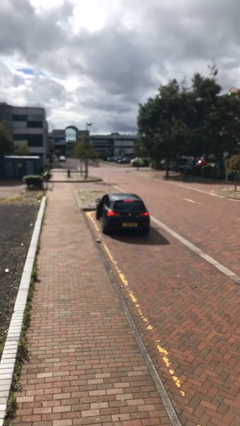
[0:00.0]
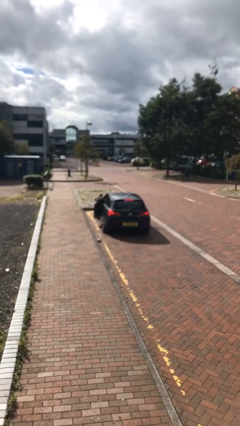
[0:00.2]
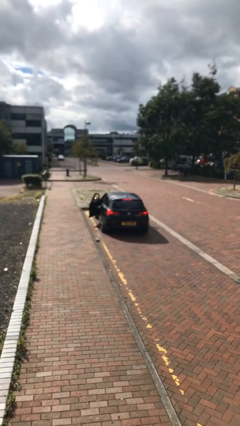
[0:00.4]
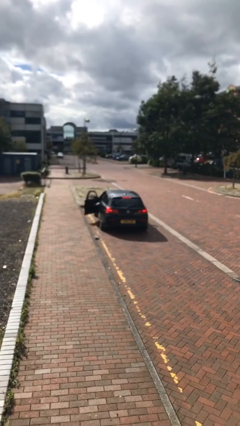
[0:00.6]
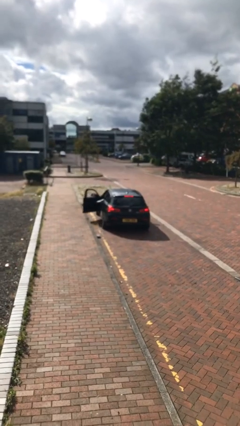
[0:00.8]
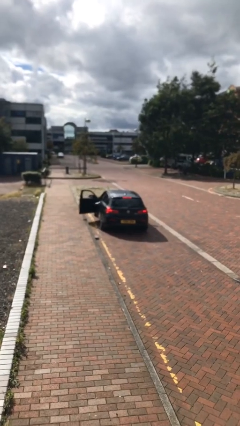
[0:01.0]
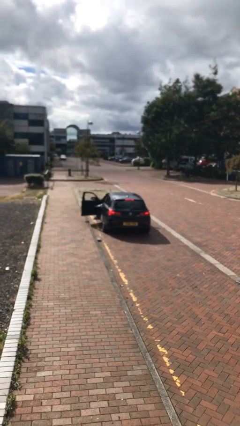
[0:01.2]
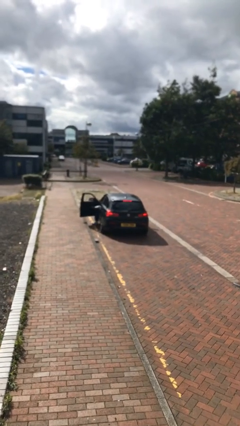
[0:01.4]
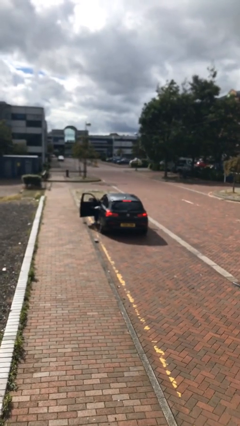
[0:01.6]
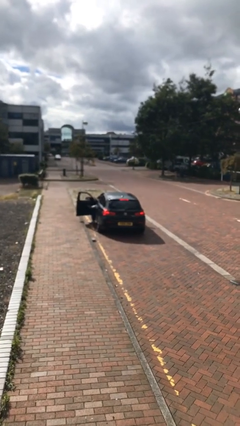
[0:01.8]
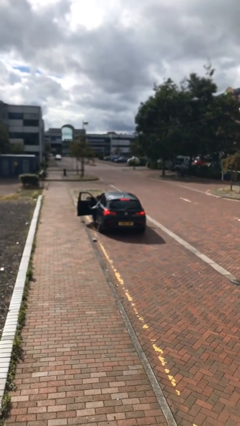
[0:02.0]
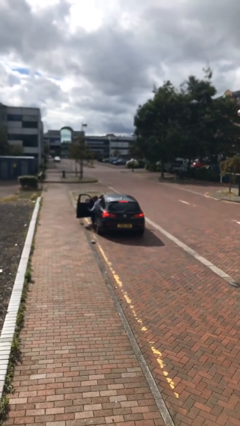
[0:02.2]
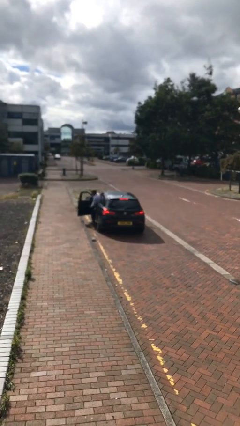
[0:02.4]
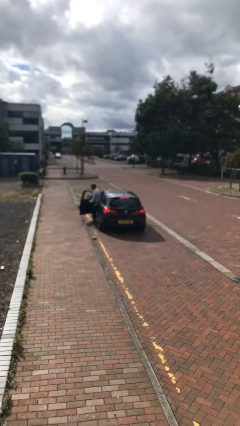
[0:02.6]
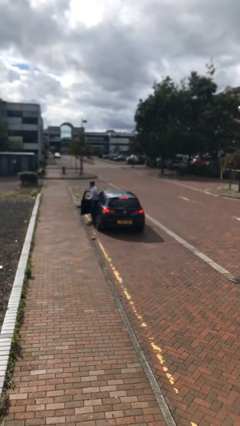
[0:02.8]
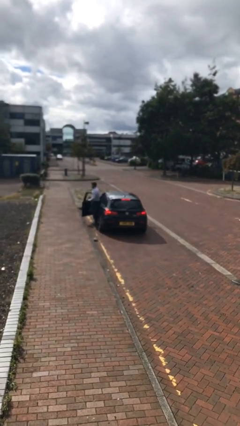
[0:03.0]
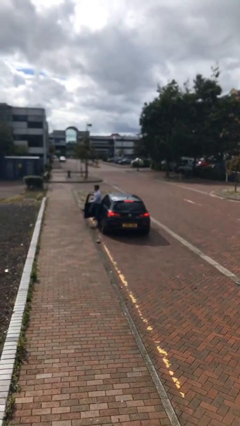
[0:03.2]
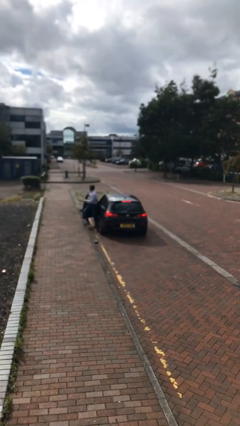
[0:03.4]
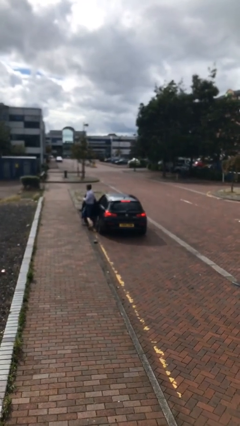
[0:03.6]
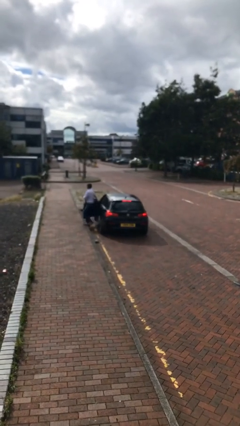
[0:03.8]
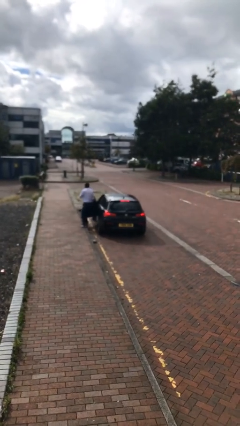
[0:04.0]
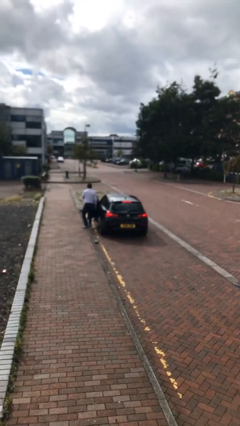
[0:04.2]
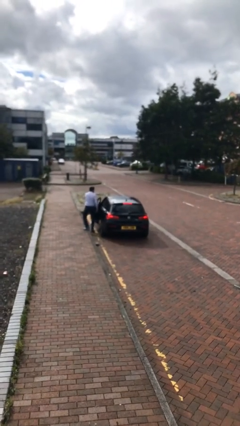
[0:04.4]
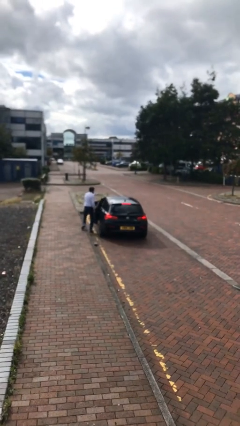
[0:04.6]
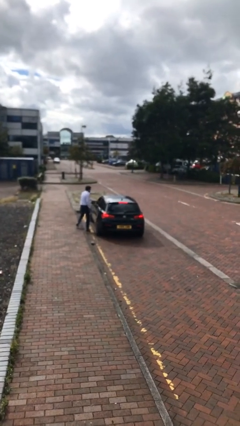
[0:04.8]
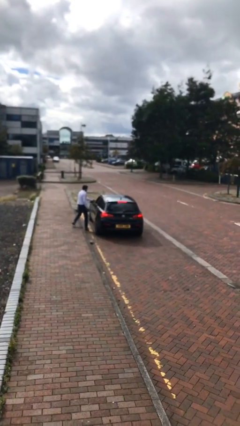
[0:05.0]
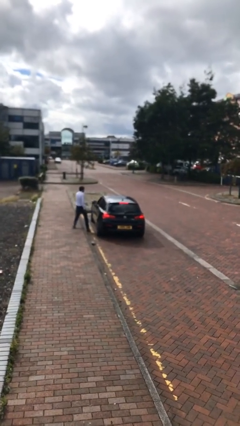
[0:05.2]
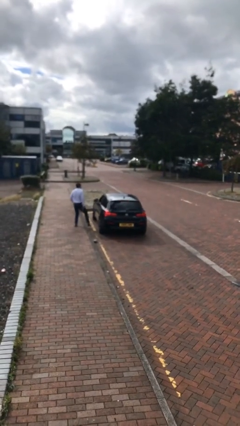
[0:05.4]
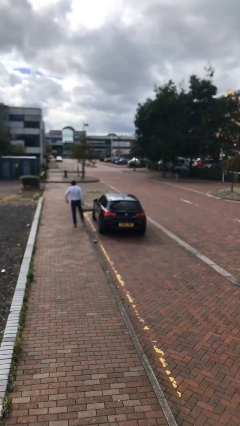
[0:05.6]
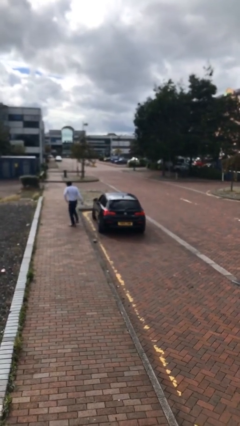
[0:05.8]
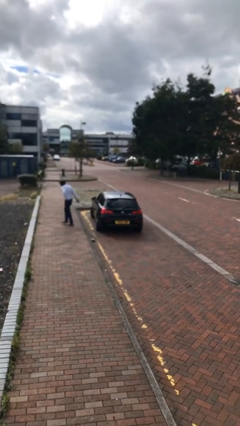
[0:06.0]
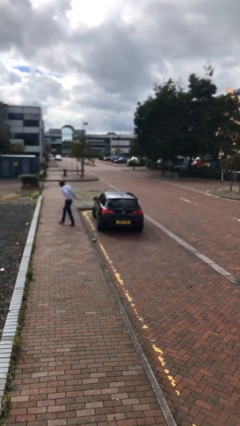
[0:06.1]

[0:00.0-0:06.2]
car drops off person

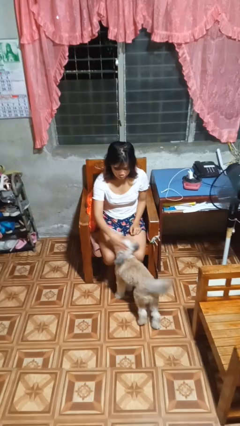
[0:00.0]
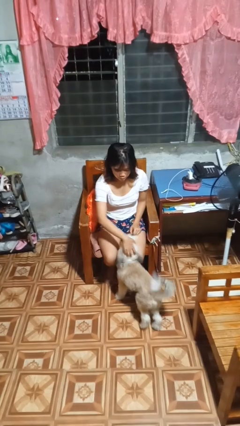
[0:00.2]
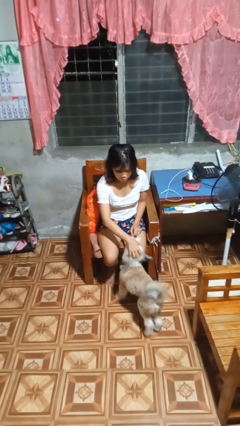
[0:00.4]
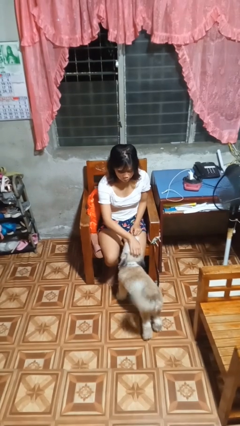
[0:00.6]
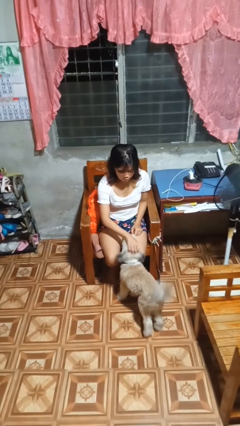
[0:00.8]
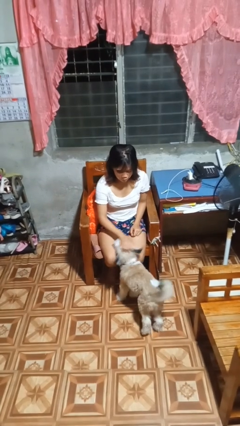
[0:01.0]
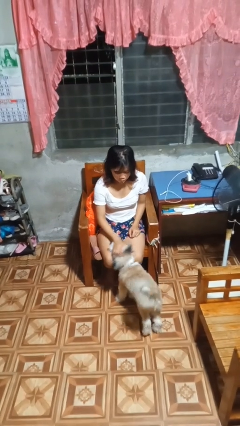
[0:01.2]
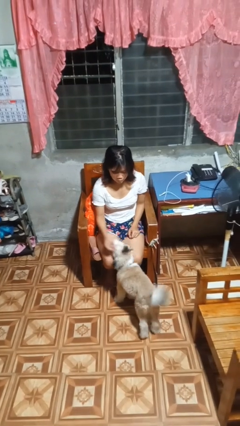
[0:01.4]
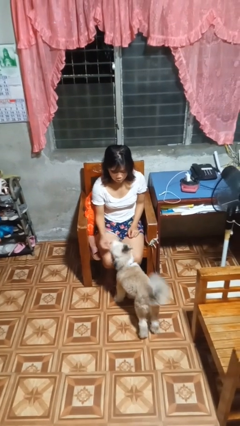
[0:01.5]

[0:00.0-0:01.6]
person pets dog

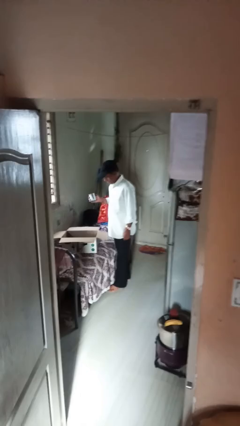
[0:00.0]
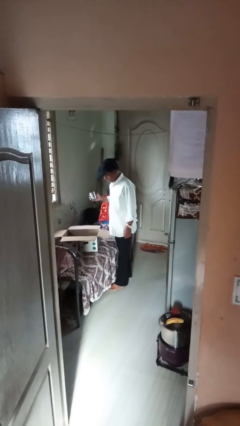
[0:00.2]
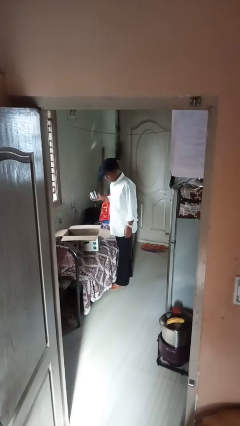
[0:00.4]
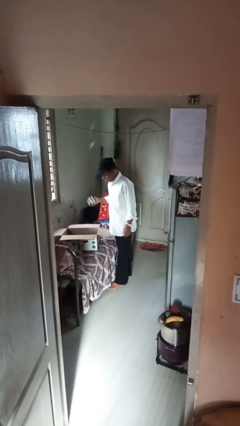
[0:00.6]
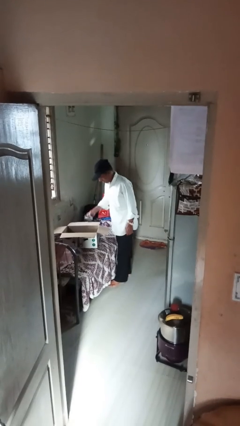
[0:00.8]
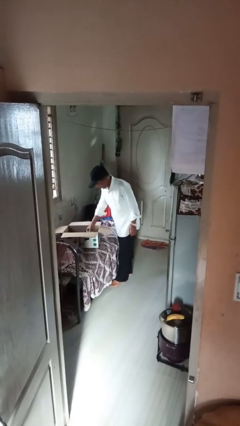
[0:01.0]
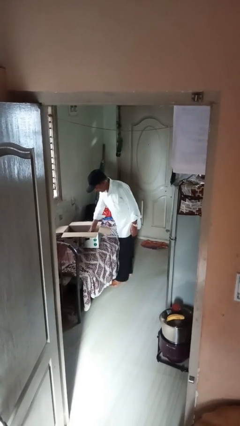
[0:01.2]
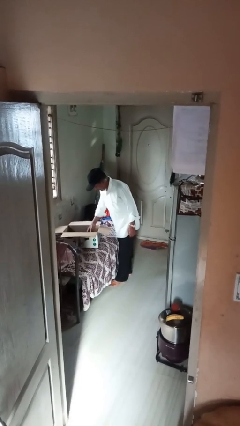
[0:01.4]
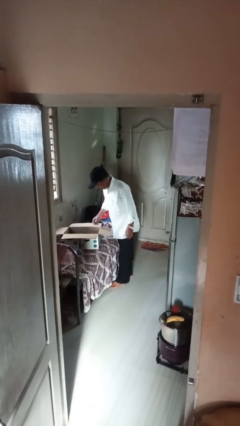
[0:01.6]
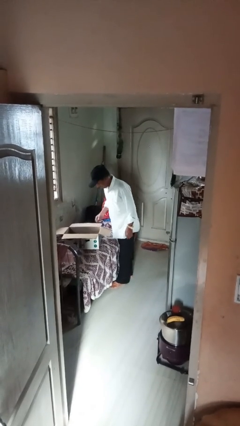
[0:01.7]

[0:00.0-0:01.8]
person puts object into box

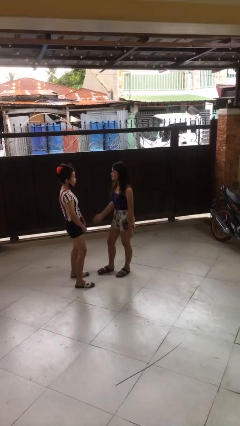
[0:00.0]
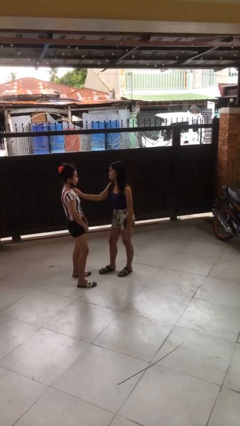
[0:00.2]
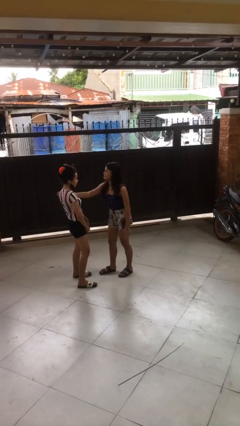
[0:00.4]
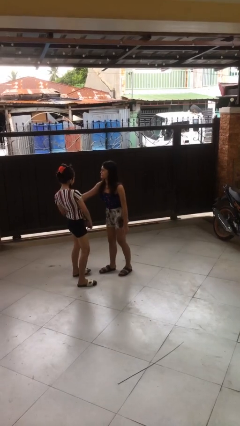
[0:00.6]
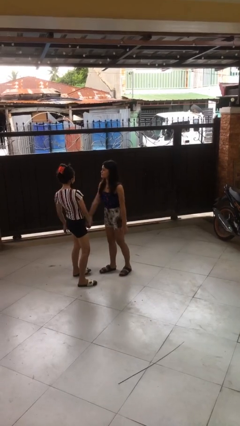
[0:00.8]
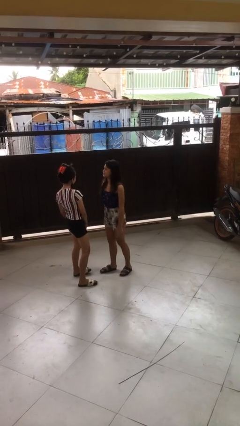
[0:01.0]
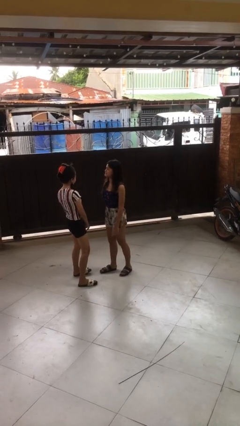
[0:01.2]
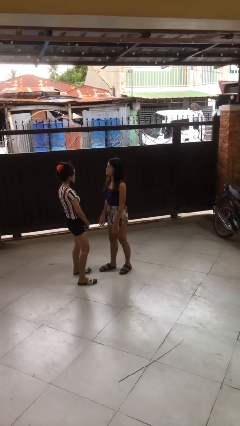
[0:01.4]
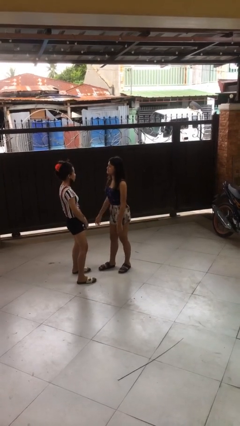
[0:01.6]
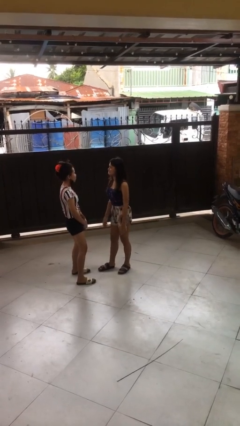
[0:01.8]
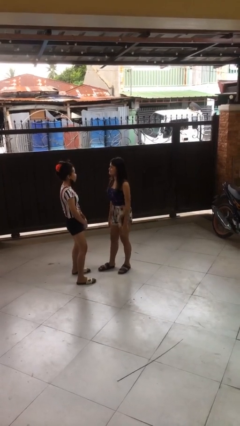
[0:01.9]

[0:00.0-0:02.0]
person shoves person

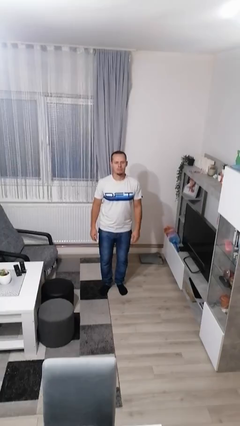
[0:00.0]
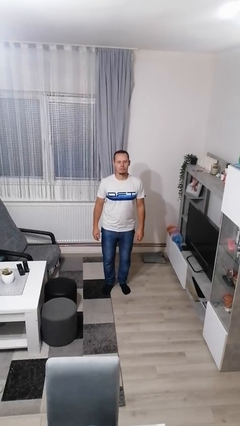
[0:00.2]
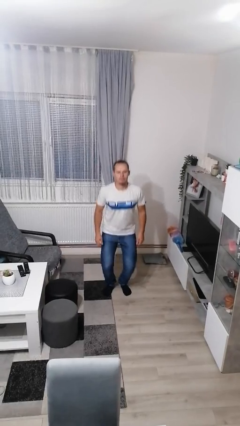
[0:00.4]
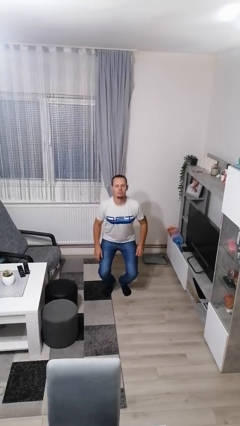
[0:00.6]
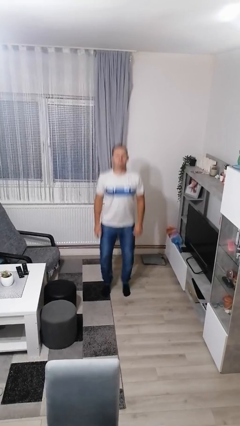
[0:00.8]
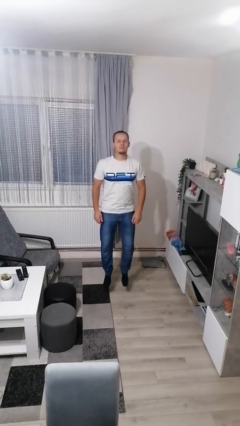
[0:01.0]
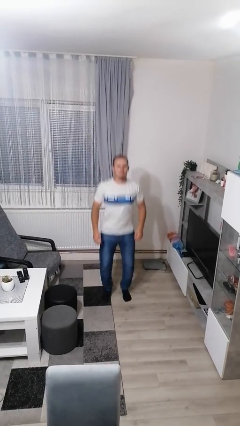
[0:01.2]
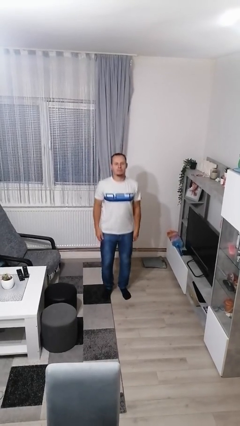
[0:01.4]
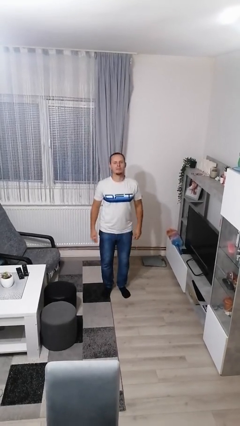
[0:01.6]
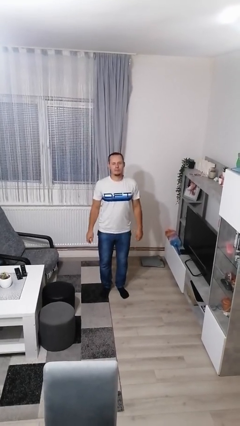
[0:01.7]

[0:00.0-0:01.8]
person jumps

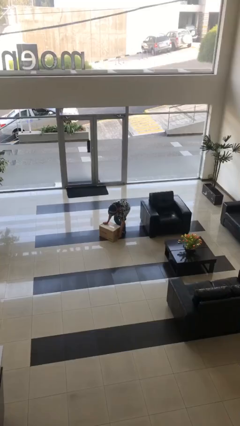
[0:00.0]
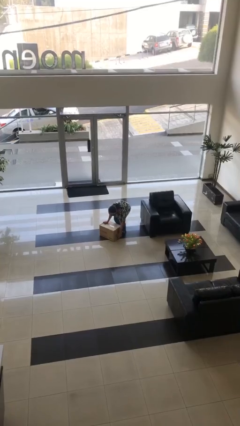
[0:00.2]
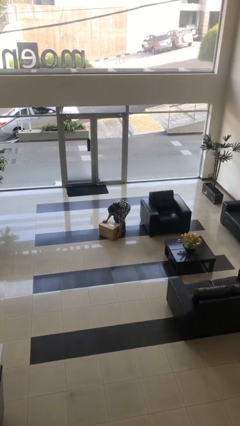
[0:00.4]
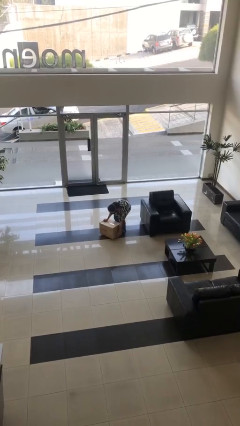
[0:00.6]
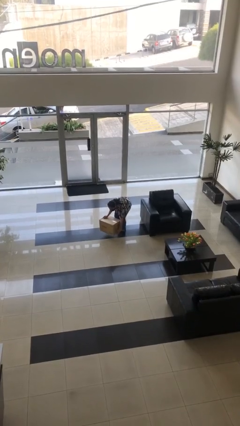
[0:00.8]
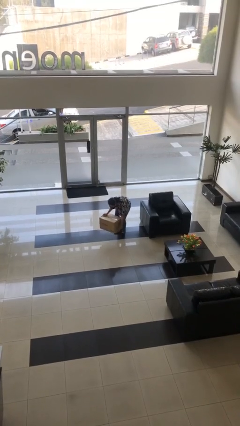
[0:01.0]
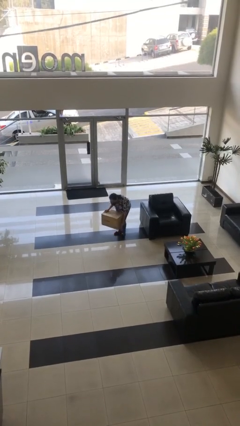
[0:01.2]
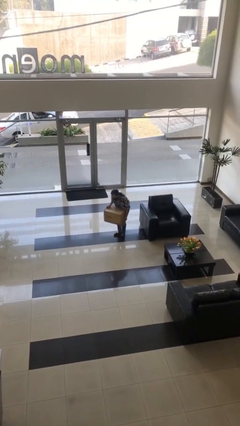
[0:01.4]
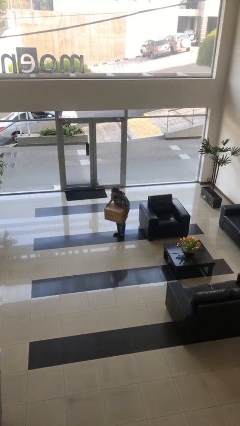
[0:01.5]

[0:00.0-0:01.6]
person picks up object from floor

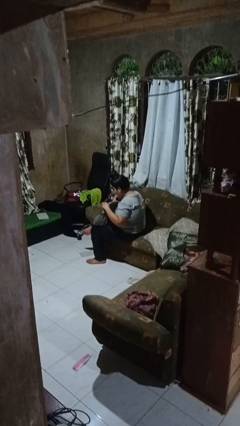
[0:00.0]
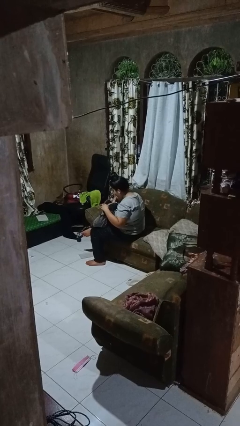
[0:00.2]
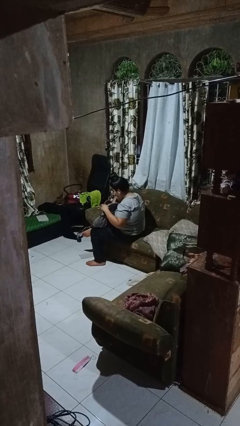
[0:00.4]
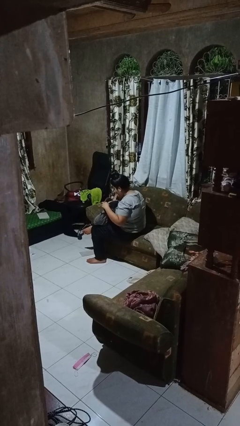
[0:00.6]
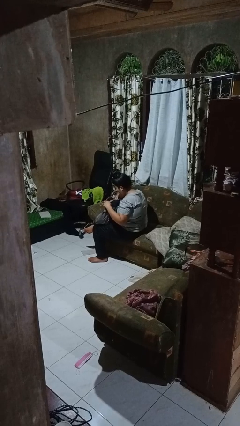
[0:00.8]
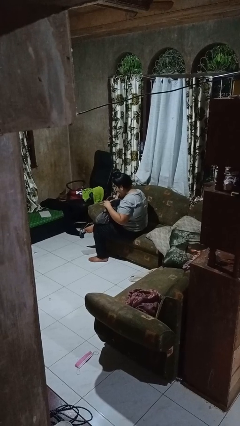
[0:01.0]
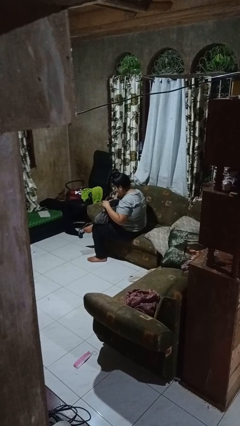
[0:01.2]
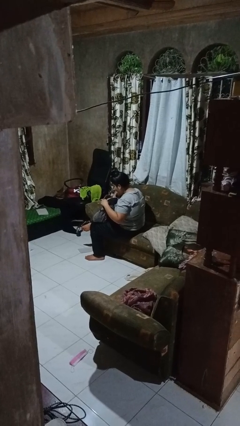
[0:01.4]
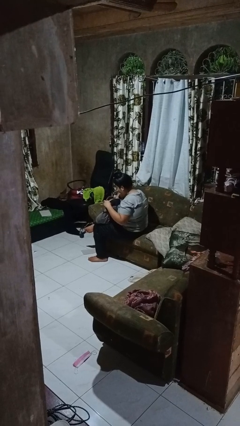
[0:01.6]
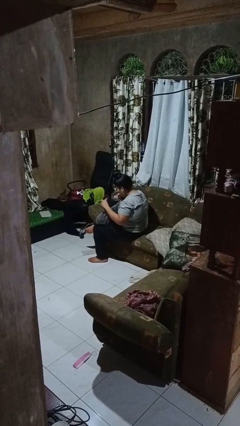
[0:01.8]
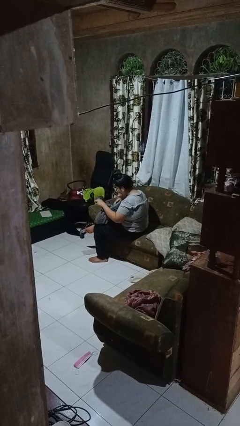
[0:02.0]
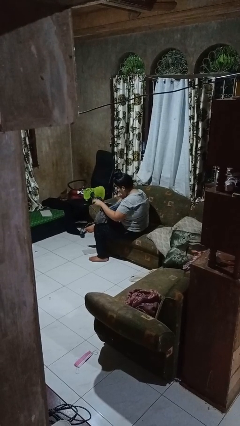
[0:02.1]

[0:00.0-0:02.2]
person puts object into backpack
